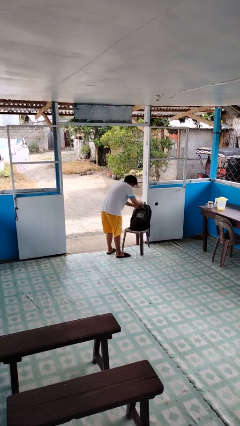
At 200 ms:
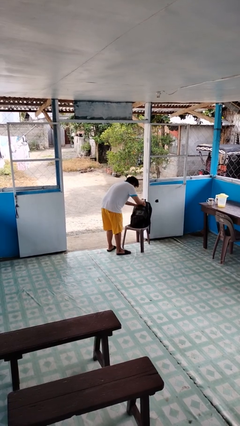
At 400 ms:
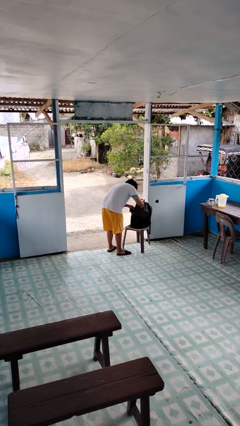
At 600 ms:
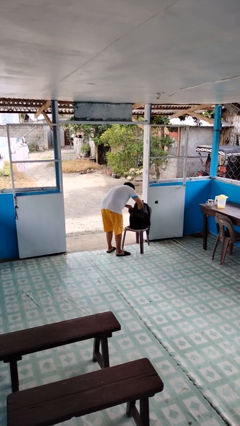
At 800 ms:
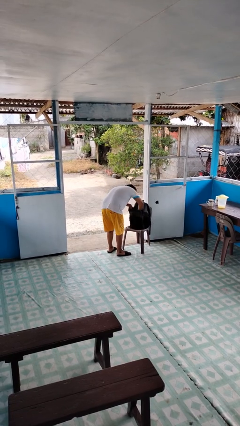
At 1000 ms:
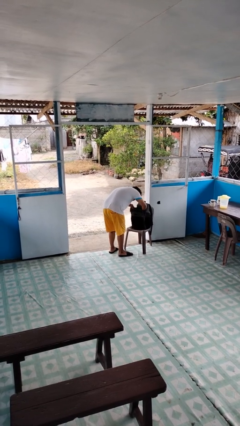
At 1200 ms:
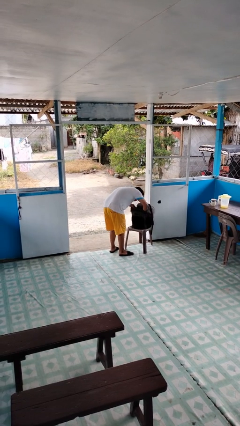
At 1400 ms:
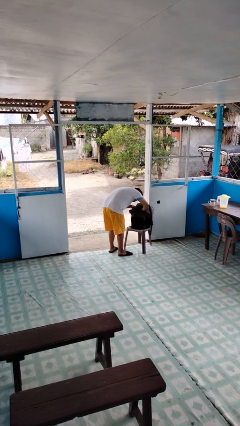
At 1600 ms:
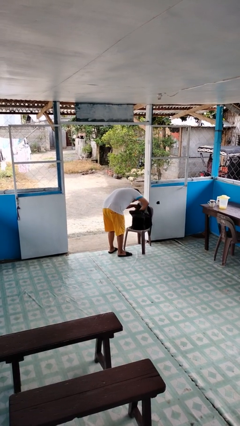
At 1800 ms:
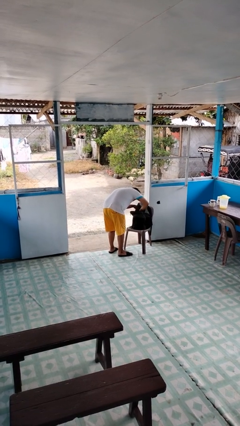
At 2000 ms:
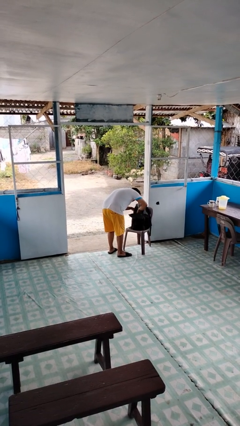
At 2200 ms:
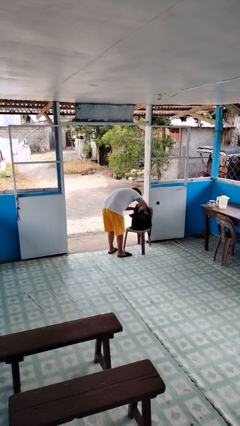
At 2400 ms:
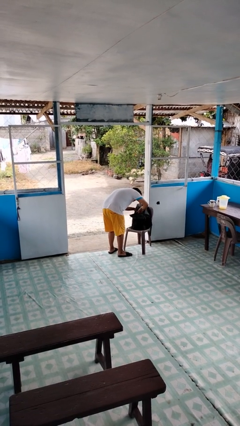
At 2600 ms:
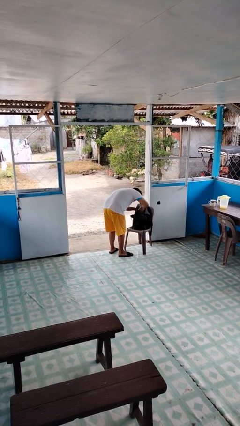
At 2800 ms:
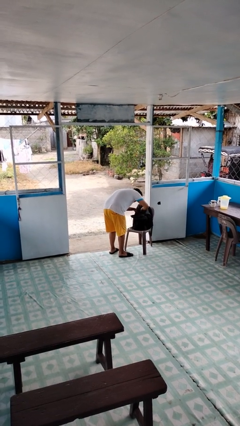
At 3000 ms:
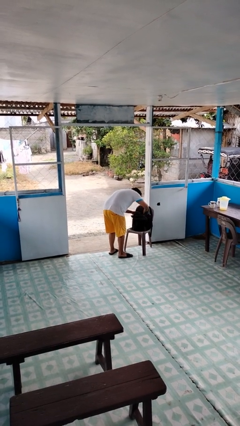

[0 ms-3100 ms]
person searches in backpack

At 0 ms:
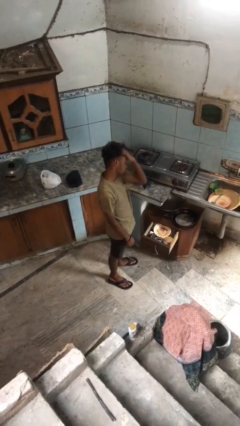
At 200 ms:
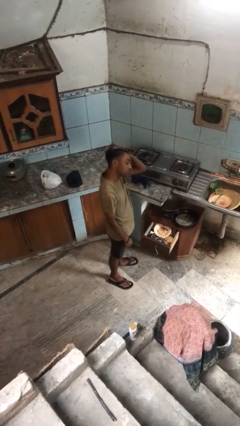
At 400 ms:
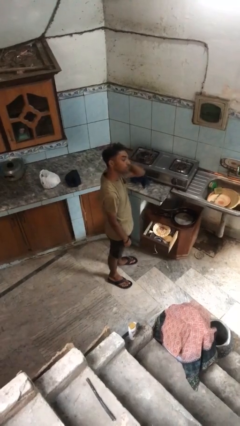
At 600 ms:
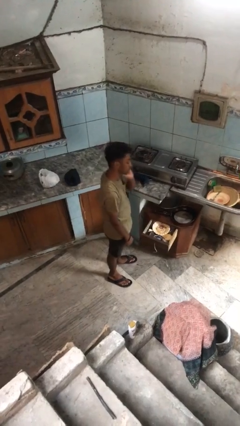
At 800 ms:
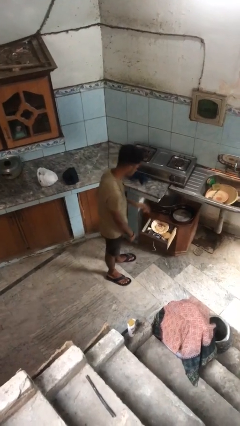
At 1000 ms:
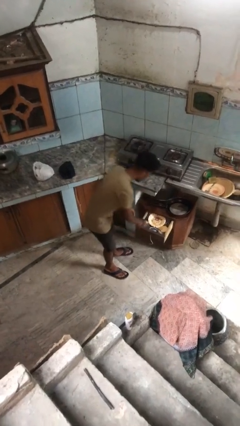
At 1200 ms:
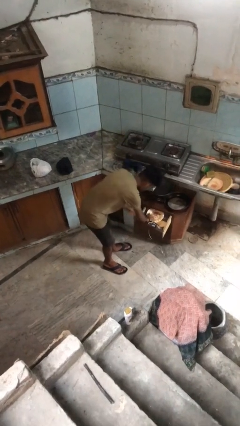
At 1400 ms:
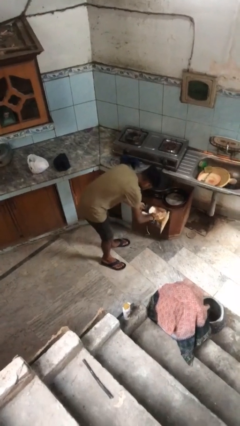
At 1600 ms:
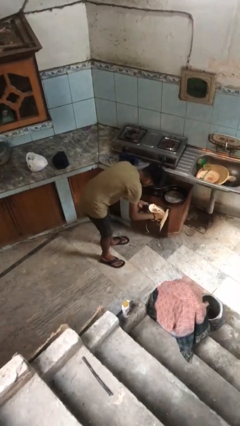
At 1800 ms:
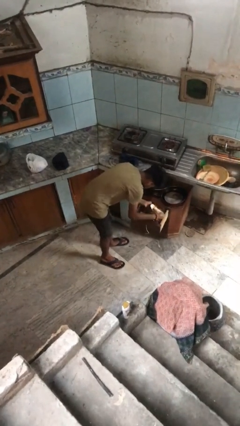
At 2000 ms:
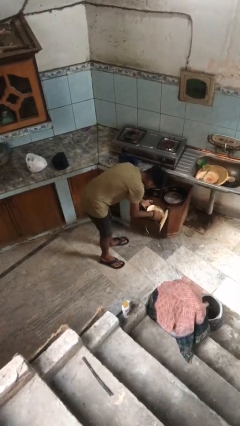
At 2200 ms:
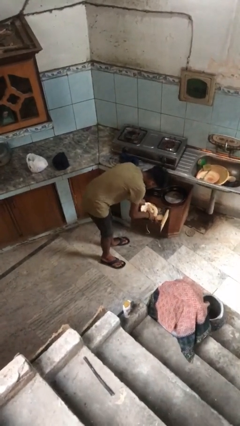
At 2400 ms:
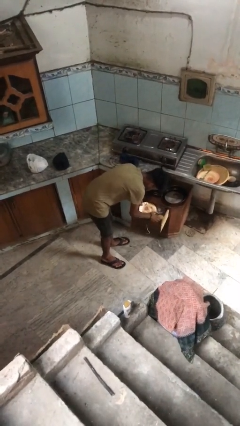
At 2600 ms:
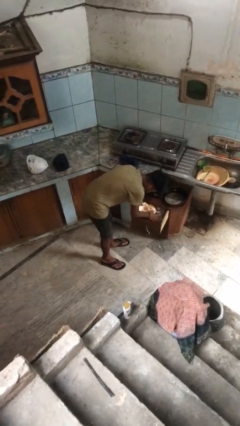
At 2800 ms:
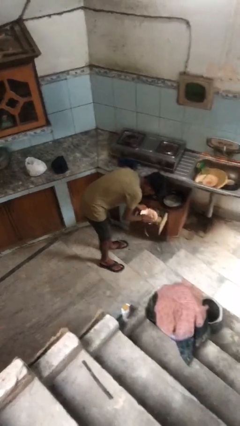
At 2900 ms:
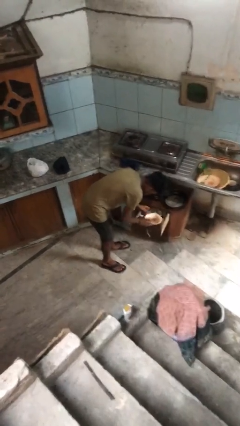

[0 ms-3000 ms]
person searches in kitchen drawer

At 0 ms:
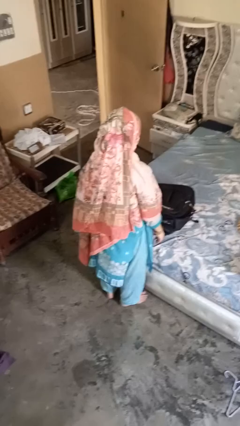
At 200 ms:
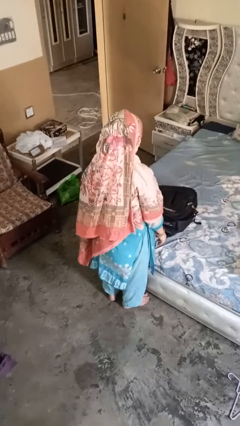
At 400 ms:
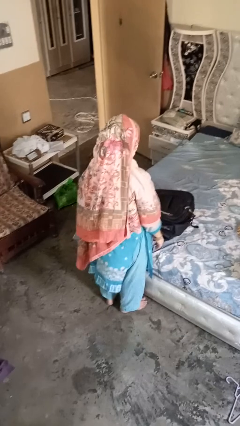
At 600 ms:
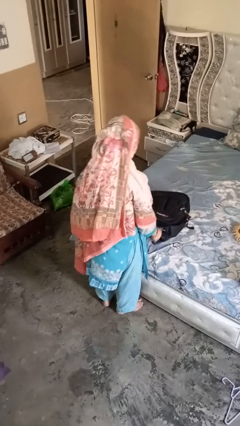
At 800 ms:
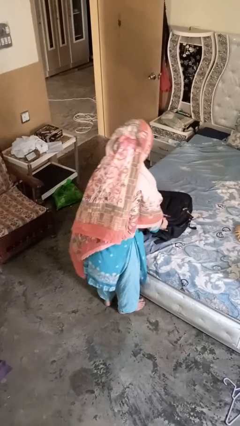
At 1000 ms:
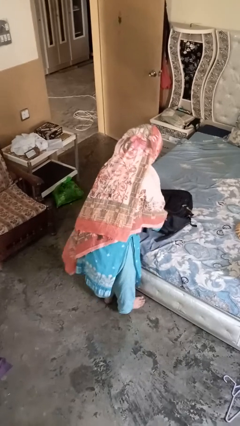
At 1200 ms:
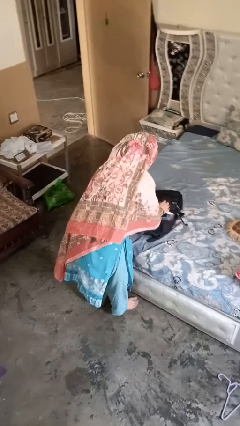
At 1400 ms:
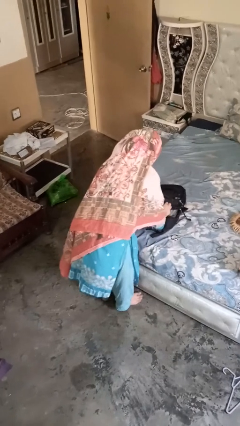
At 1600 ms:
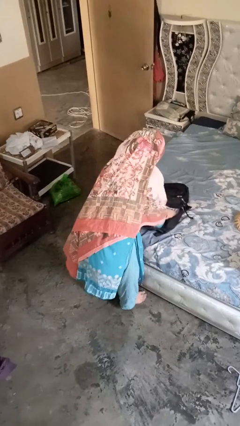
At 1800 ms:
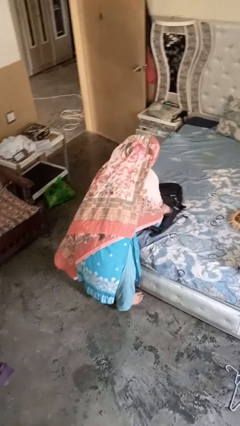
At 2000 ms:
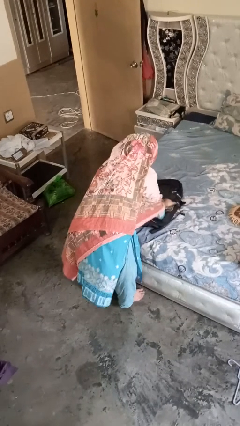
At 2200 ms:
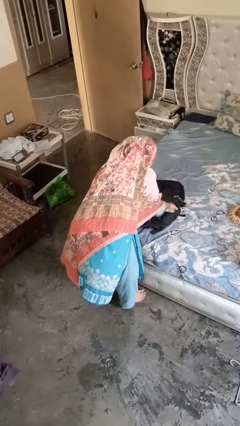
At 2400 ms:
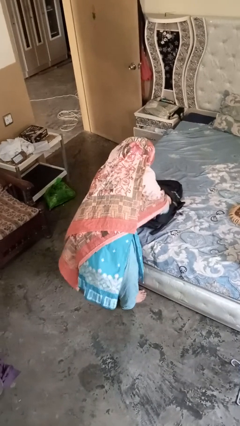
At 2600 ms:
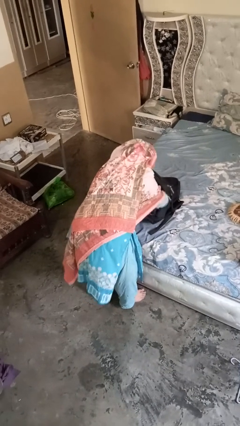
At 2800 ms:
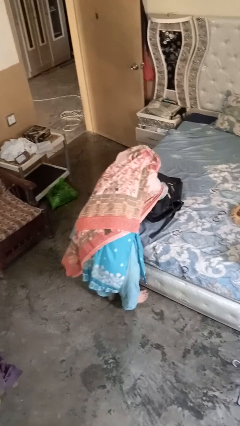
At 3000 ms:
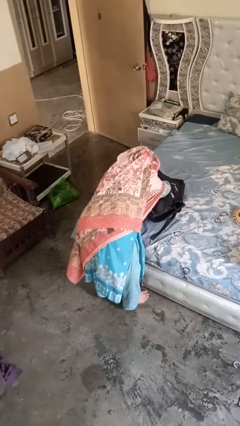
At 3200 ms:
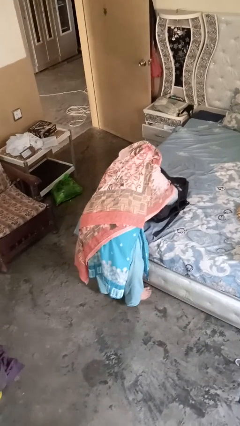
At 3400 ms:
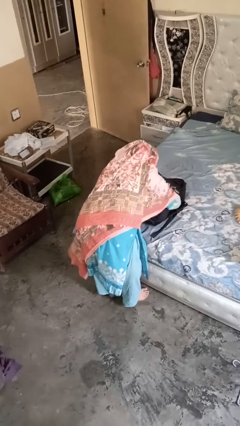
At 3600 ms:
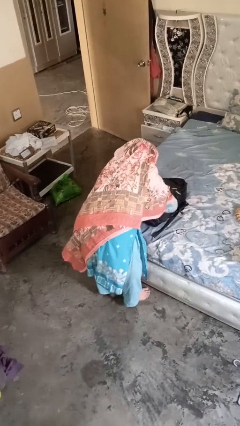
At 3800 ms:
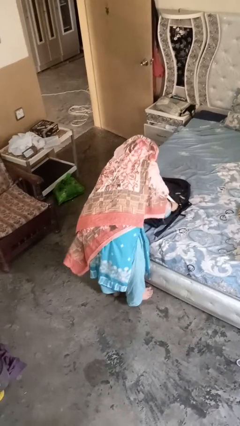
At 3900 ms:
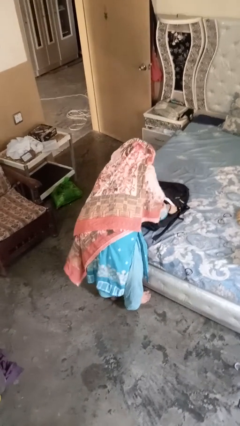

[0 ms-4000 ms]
person searches in bag

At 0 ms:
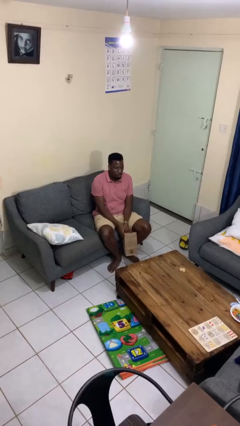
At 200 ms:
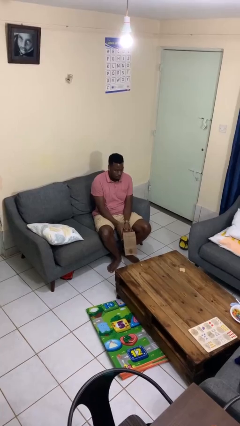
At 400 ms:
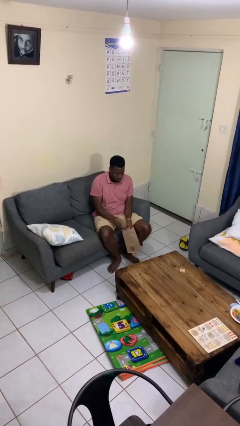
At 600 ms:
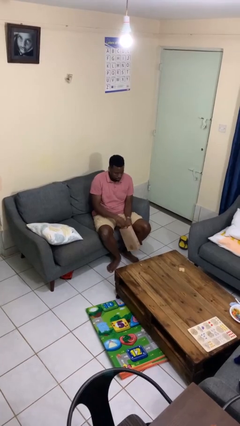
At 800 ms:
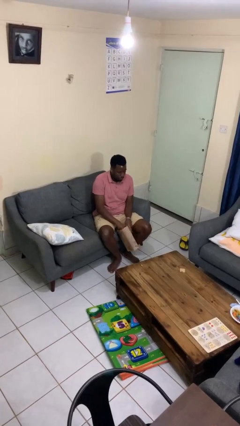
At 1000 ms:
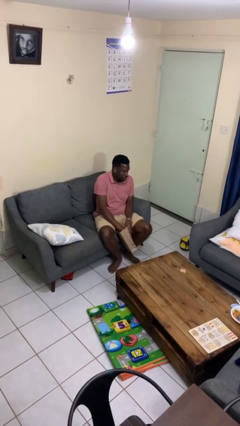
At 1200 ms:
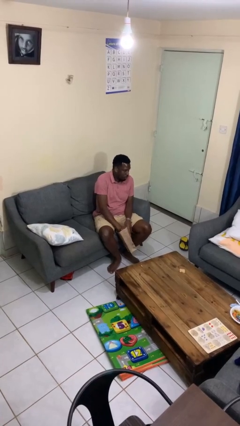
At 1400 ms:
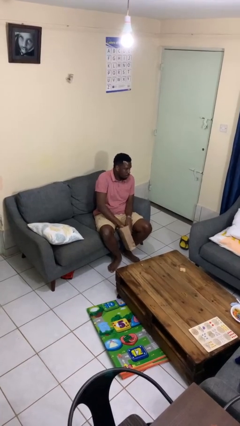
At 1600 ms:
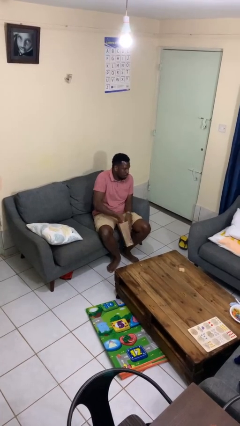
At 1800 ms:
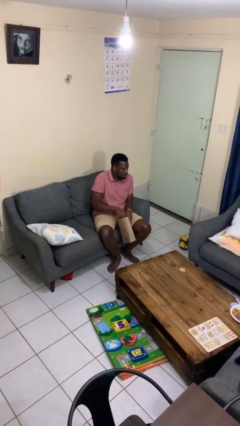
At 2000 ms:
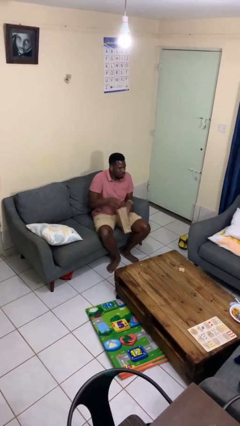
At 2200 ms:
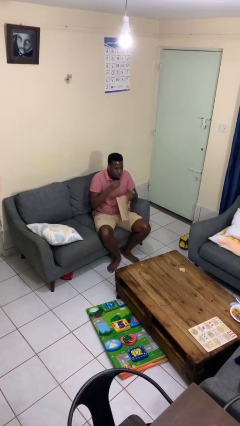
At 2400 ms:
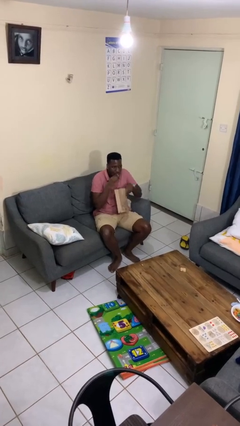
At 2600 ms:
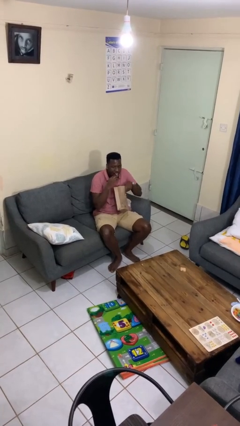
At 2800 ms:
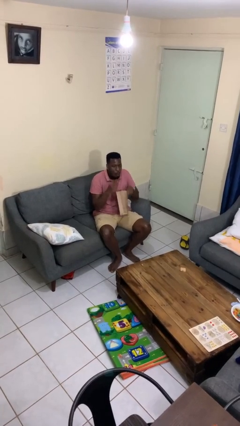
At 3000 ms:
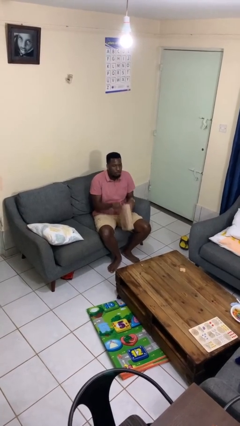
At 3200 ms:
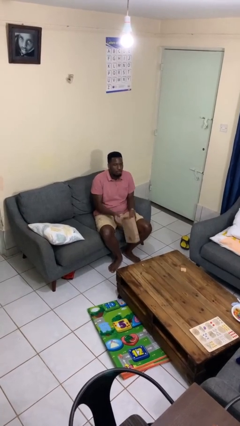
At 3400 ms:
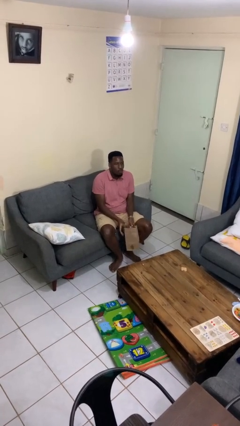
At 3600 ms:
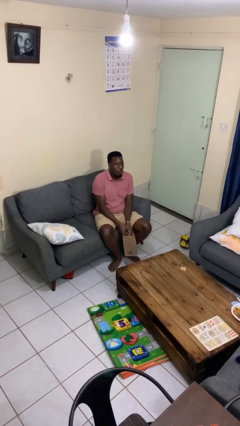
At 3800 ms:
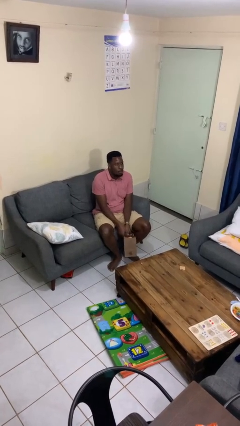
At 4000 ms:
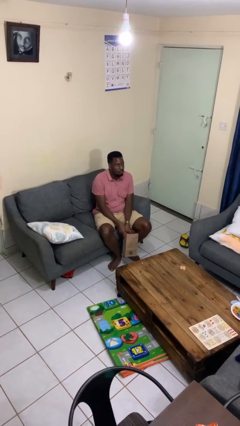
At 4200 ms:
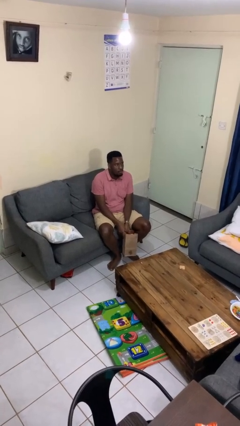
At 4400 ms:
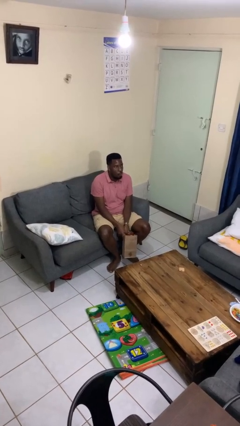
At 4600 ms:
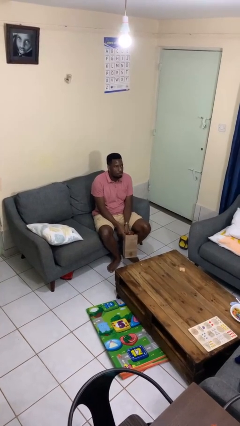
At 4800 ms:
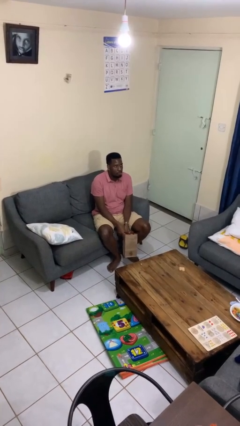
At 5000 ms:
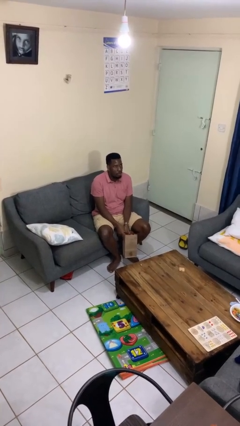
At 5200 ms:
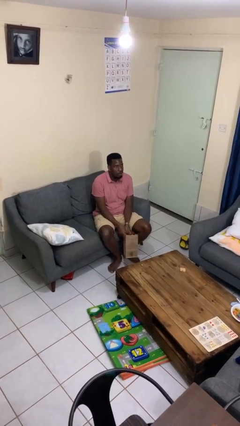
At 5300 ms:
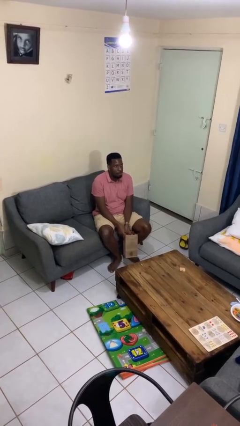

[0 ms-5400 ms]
person eats snack from bag

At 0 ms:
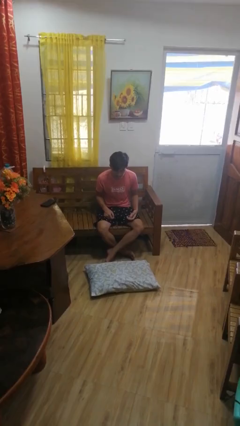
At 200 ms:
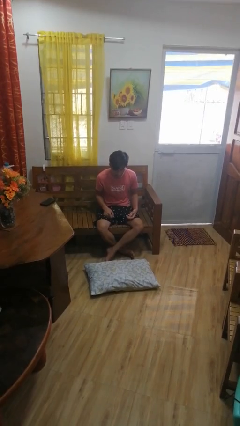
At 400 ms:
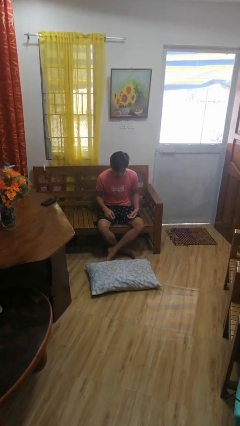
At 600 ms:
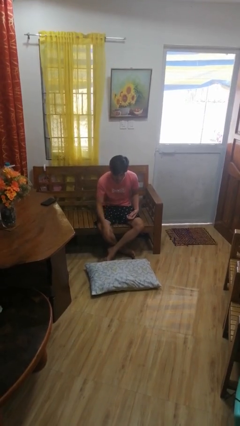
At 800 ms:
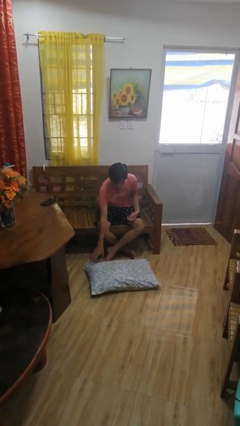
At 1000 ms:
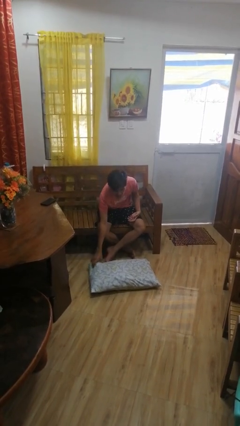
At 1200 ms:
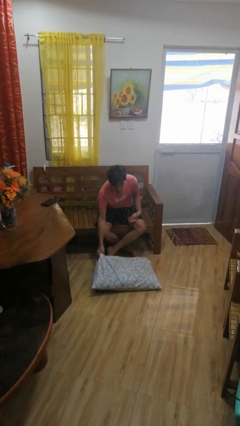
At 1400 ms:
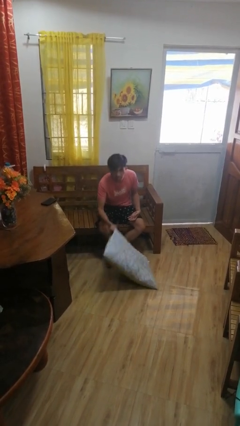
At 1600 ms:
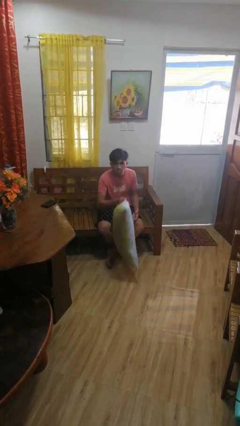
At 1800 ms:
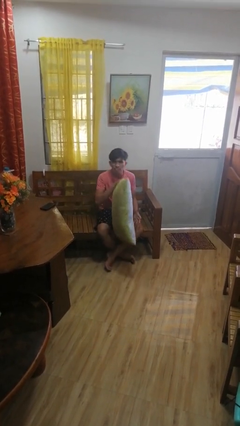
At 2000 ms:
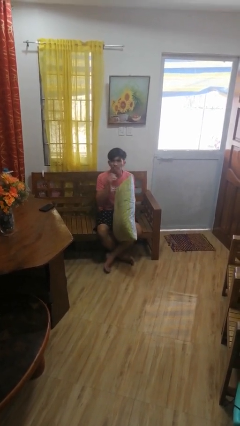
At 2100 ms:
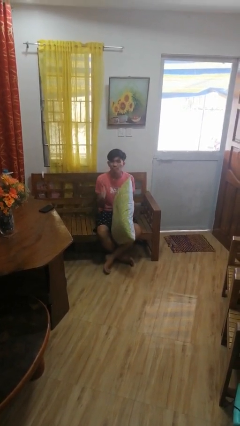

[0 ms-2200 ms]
person picks up object from floor
